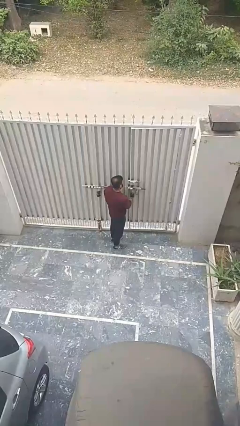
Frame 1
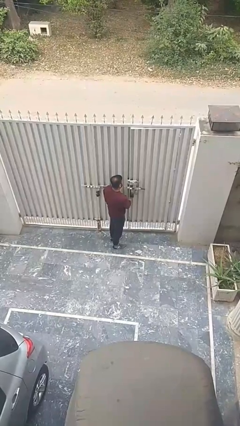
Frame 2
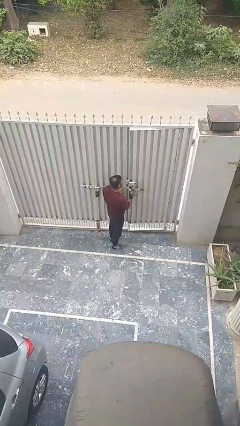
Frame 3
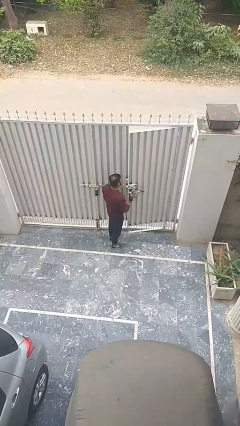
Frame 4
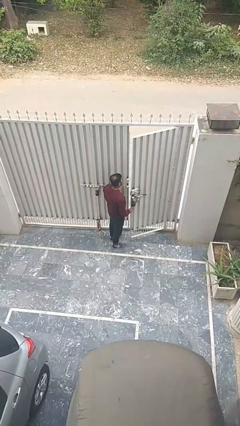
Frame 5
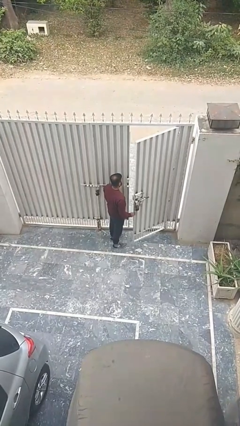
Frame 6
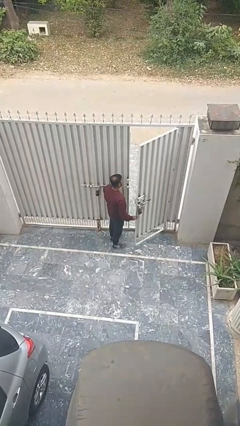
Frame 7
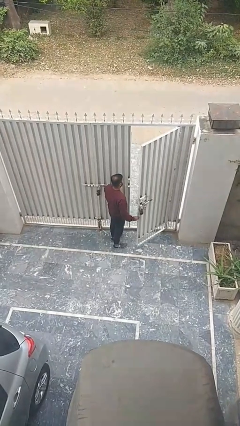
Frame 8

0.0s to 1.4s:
person opens facility door

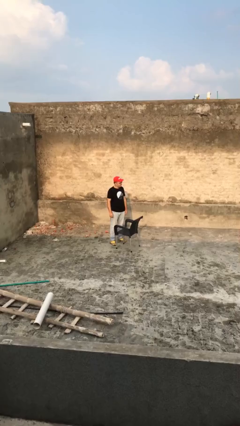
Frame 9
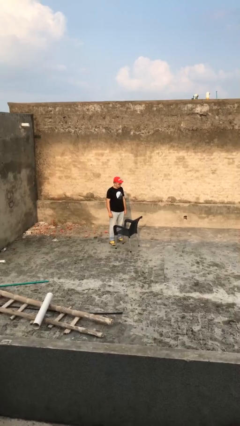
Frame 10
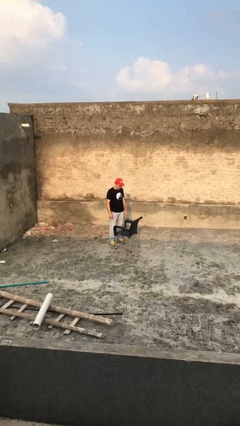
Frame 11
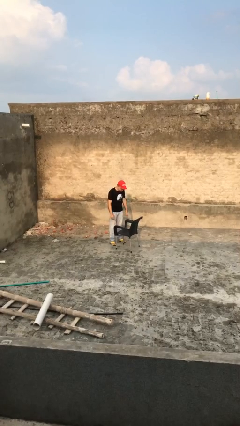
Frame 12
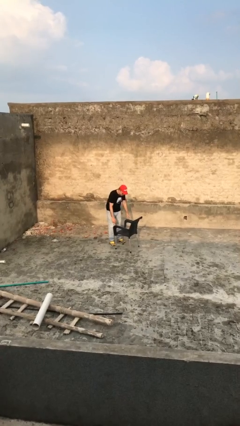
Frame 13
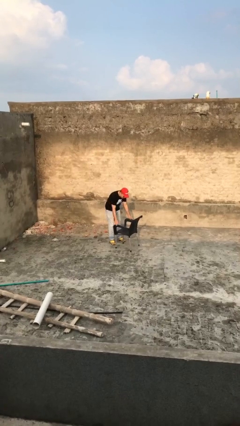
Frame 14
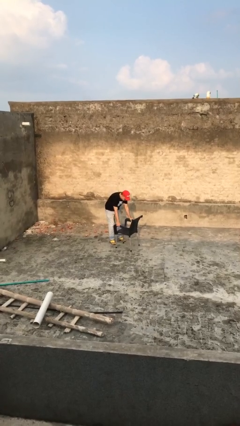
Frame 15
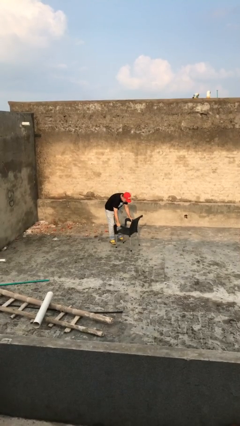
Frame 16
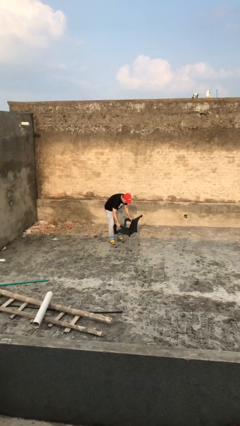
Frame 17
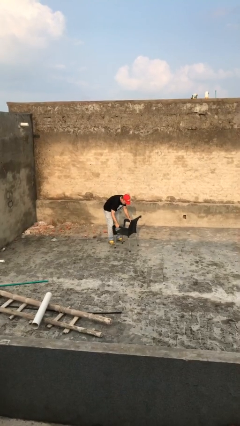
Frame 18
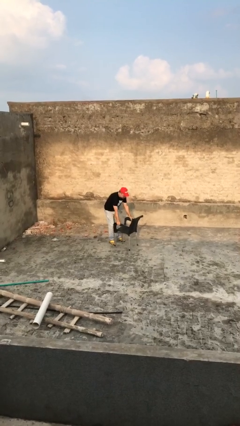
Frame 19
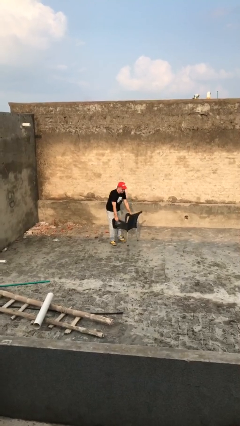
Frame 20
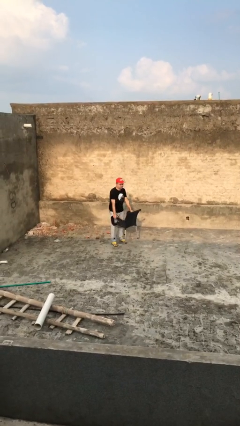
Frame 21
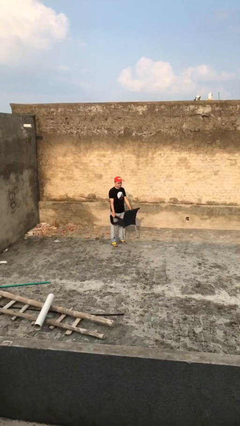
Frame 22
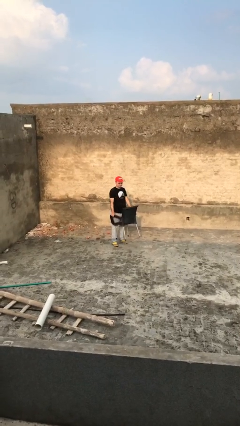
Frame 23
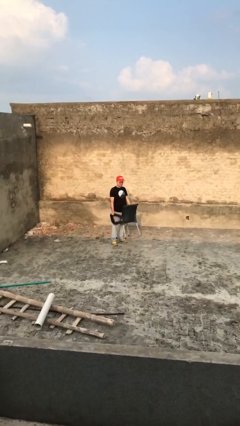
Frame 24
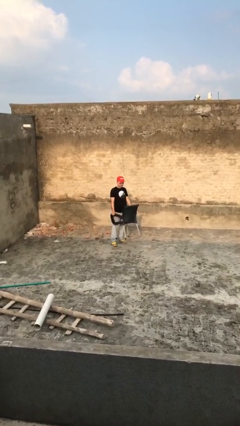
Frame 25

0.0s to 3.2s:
person picks up object from floor

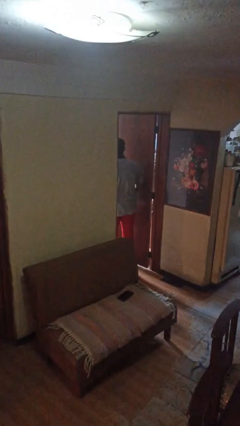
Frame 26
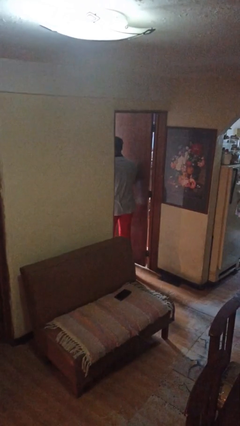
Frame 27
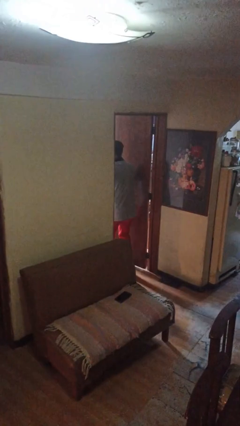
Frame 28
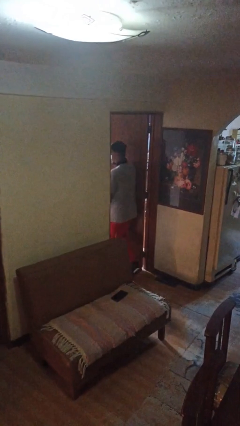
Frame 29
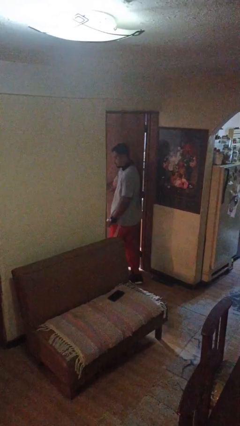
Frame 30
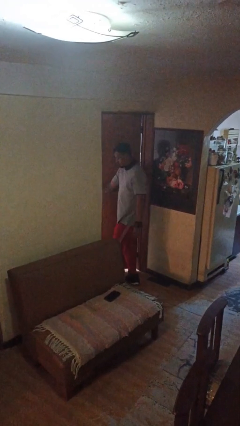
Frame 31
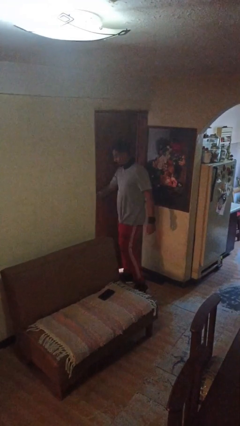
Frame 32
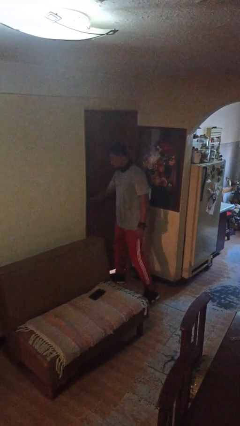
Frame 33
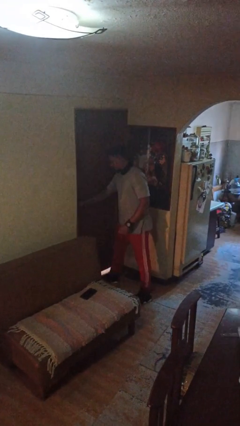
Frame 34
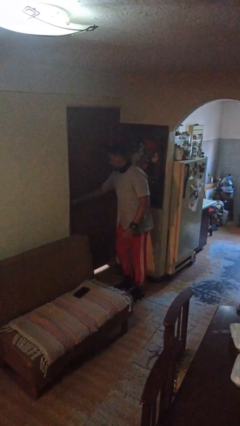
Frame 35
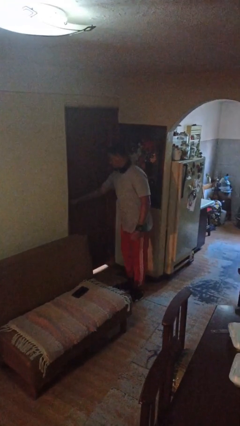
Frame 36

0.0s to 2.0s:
person closes facility door

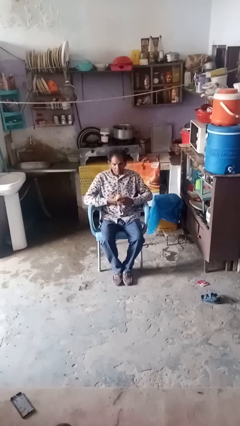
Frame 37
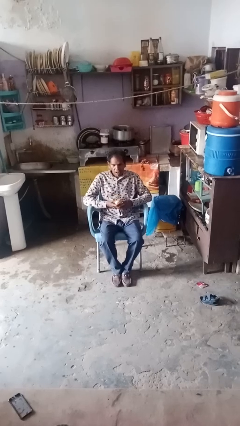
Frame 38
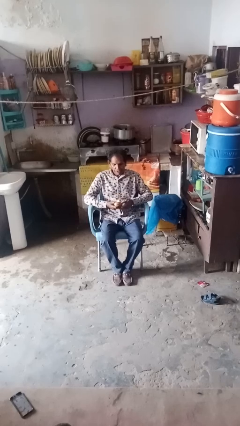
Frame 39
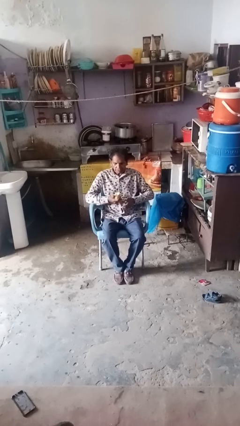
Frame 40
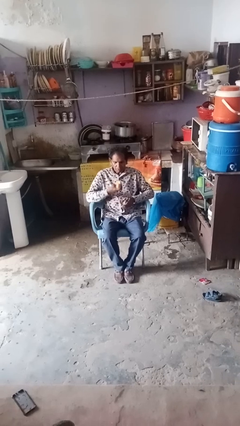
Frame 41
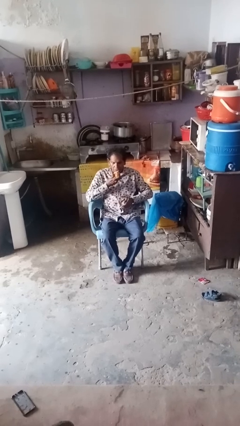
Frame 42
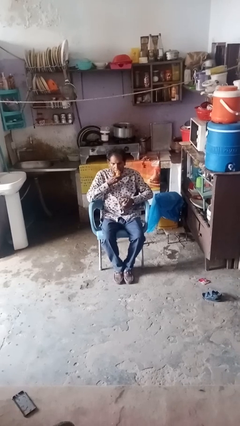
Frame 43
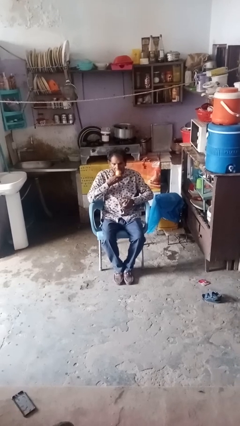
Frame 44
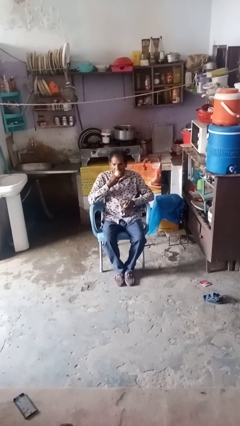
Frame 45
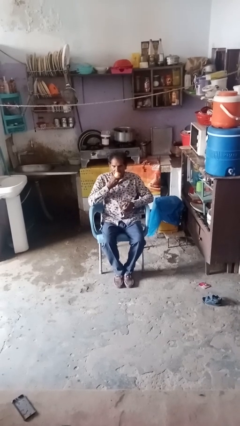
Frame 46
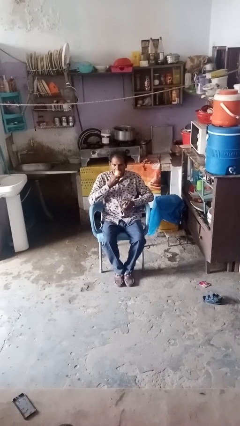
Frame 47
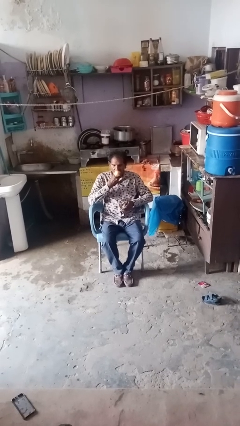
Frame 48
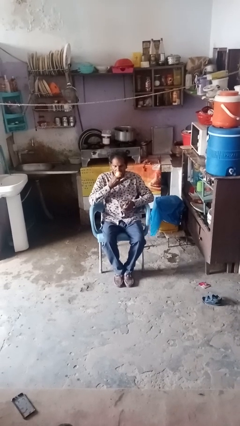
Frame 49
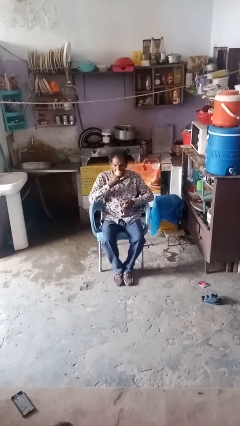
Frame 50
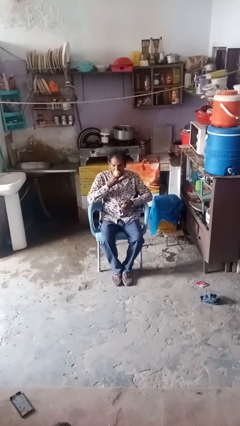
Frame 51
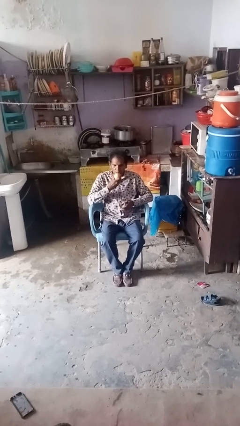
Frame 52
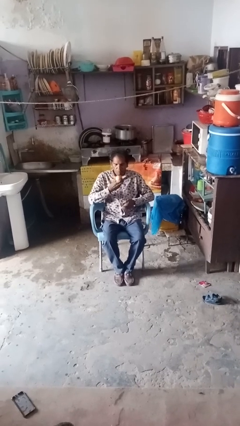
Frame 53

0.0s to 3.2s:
person eats apple

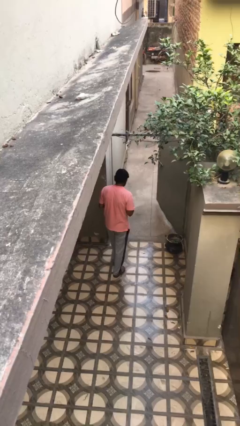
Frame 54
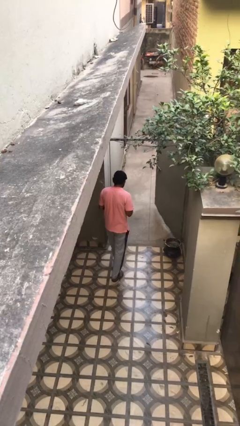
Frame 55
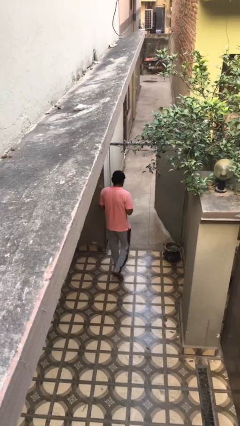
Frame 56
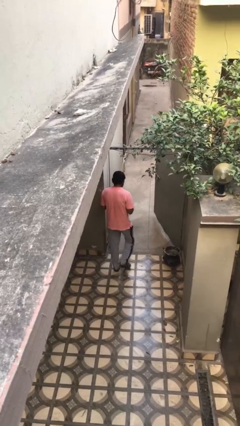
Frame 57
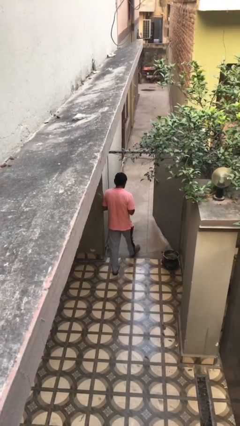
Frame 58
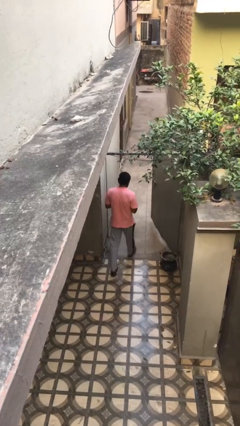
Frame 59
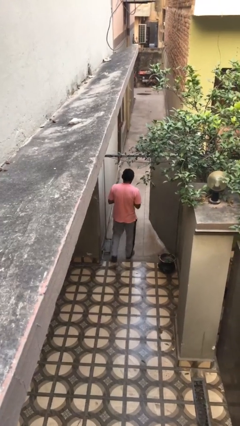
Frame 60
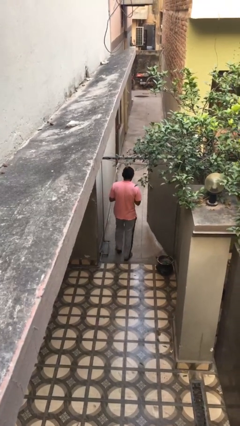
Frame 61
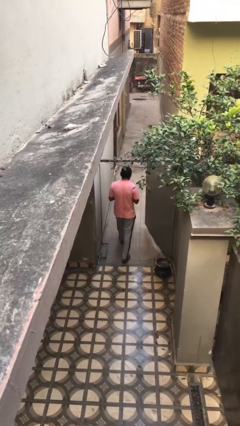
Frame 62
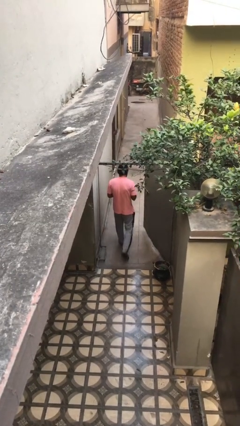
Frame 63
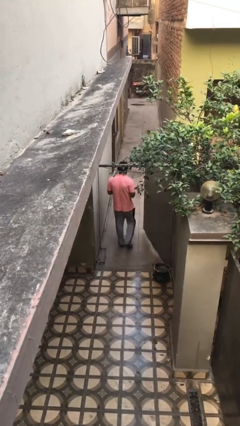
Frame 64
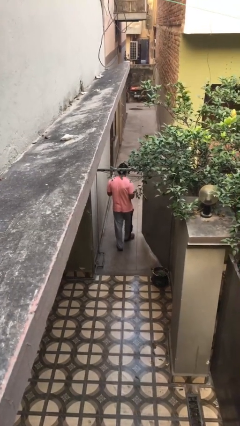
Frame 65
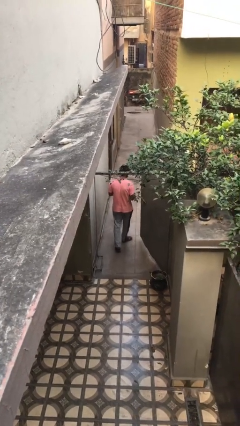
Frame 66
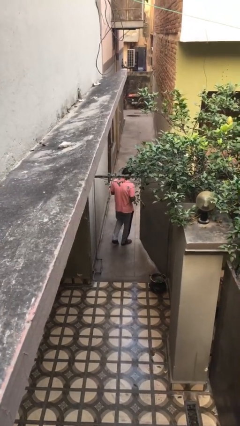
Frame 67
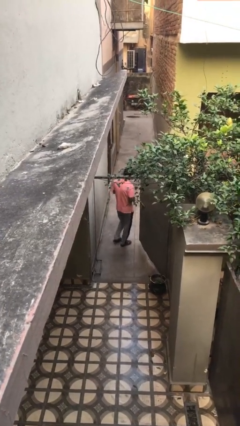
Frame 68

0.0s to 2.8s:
person exits scene through structure

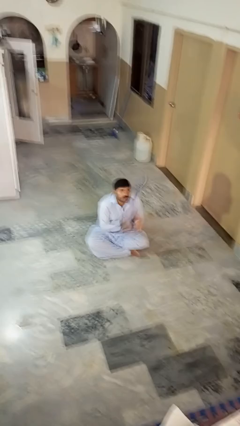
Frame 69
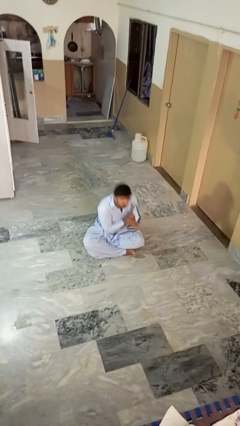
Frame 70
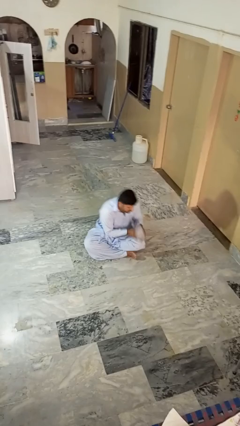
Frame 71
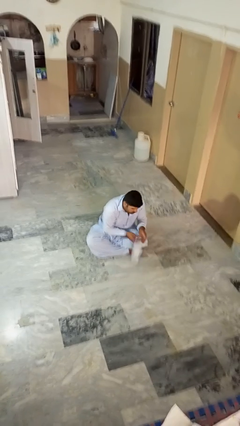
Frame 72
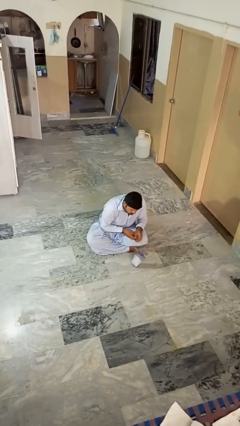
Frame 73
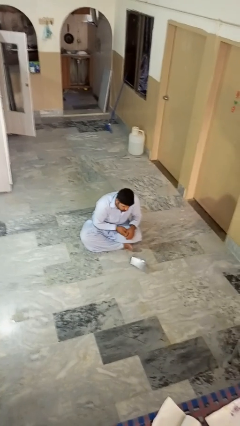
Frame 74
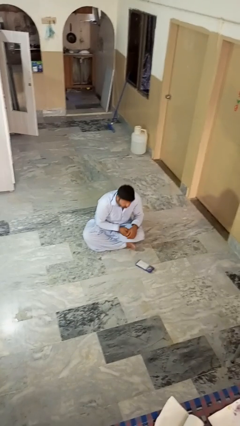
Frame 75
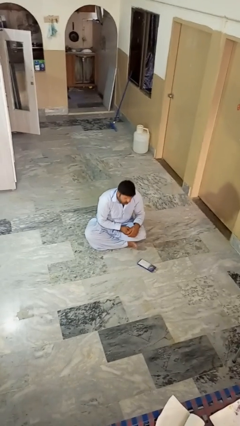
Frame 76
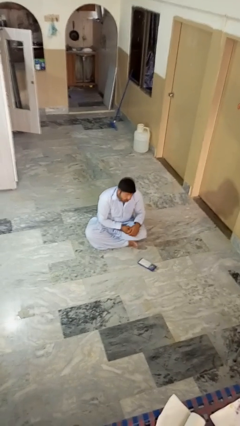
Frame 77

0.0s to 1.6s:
person catches dropped object

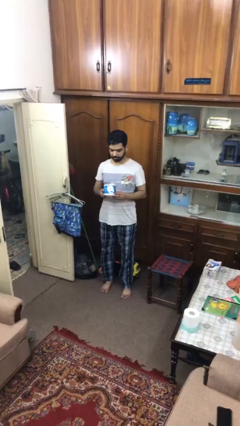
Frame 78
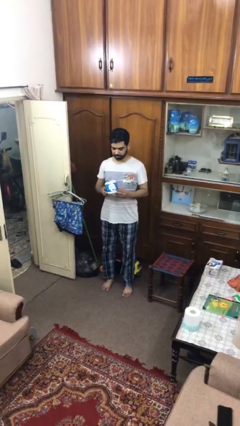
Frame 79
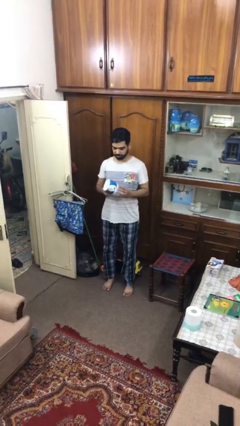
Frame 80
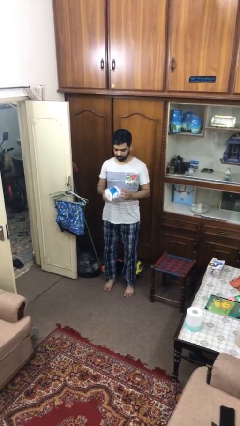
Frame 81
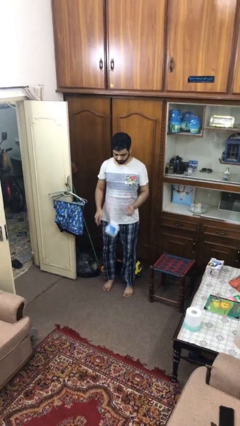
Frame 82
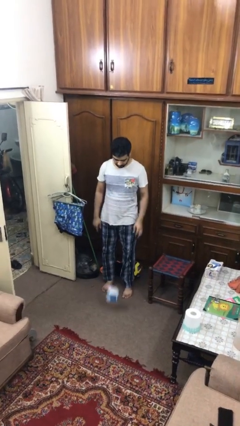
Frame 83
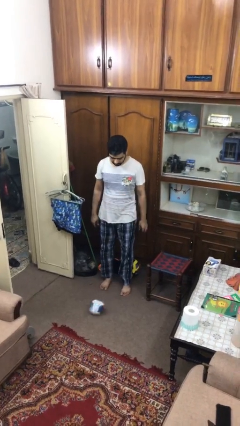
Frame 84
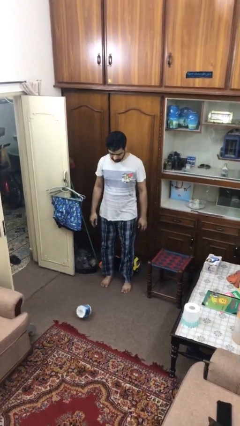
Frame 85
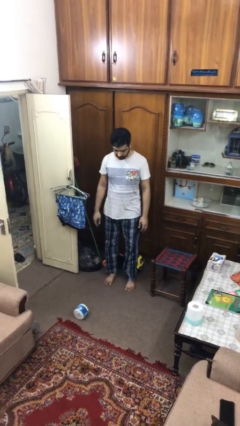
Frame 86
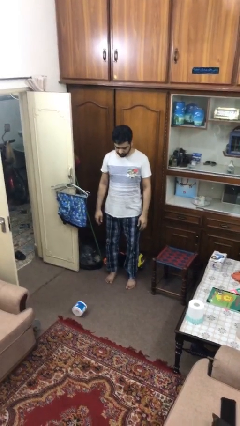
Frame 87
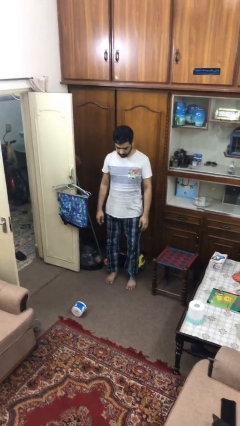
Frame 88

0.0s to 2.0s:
person drops object

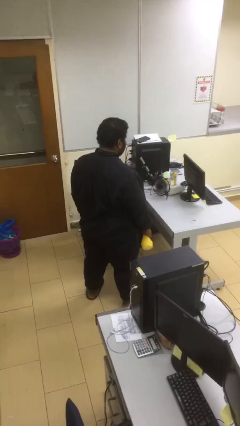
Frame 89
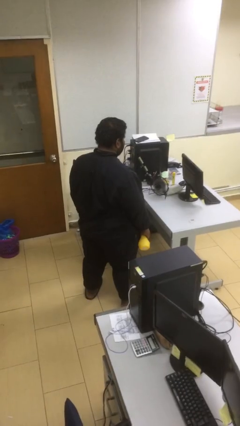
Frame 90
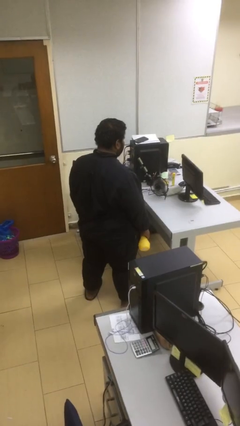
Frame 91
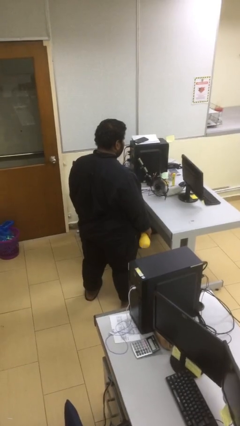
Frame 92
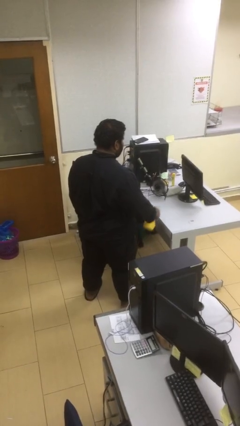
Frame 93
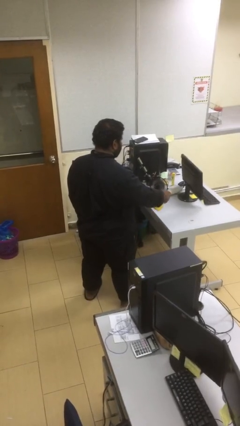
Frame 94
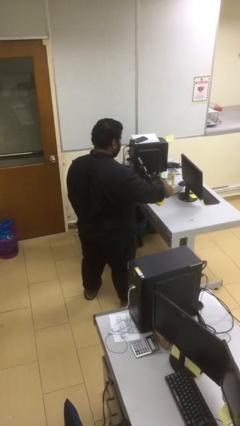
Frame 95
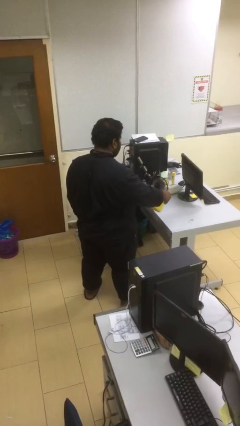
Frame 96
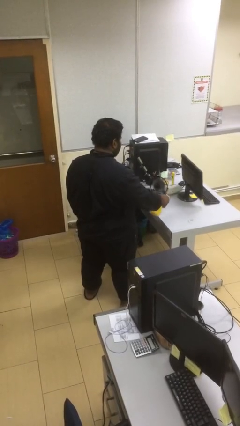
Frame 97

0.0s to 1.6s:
person sprays from bottle
